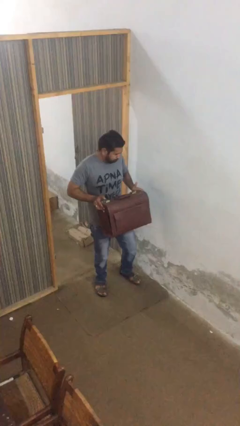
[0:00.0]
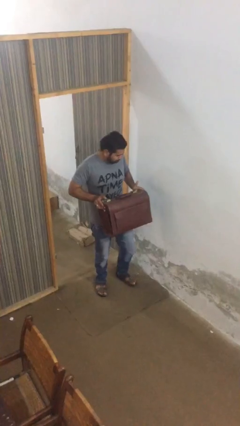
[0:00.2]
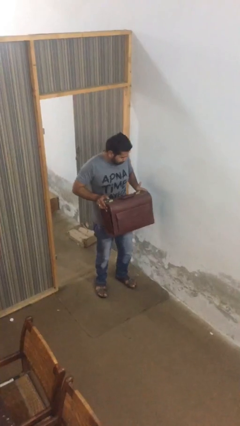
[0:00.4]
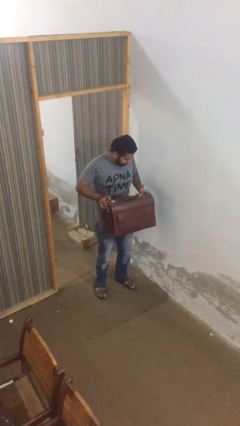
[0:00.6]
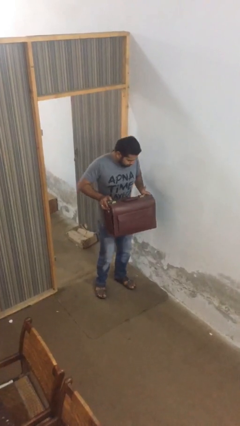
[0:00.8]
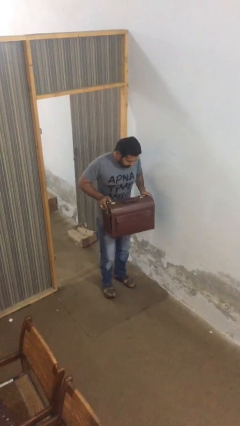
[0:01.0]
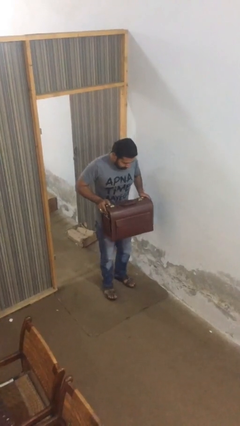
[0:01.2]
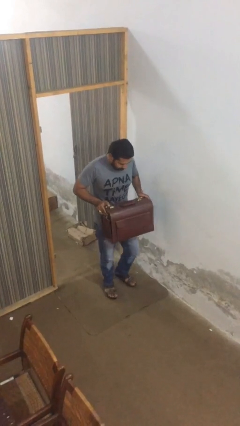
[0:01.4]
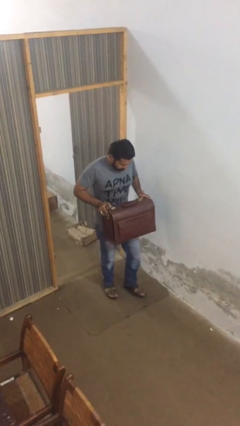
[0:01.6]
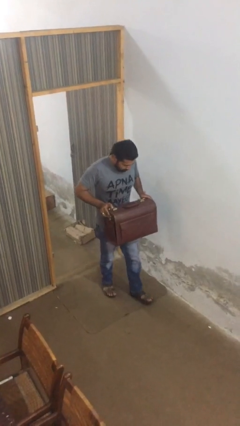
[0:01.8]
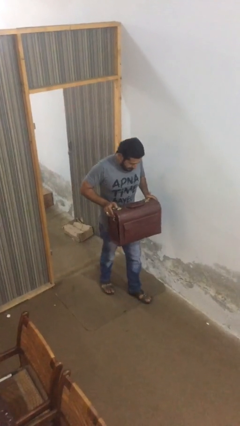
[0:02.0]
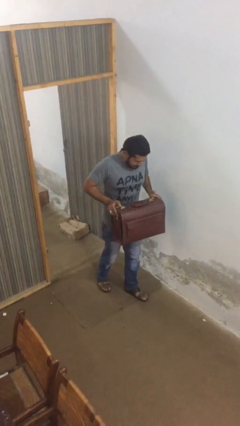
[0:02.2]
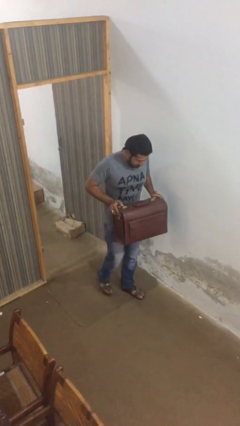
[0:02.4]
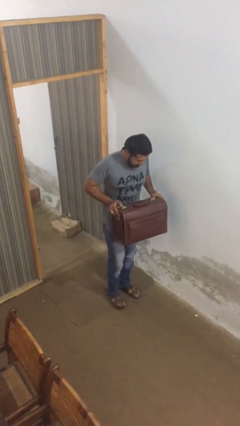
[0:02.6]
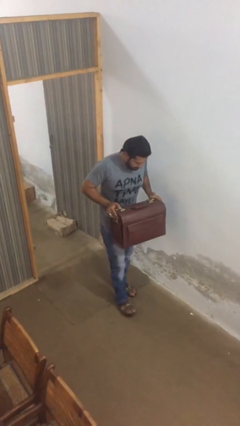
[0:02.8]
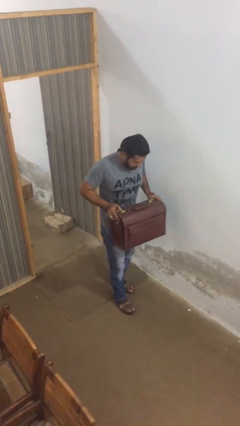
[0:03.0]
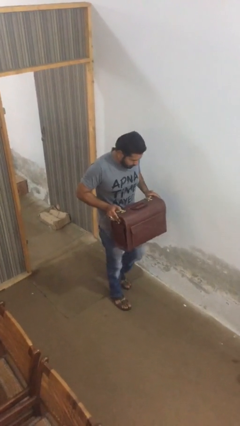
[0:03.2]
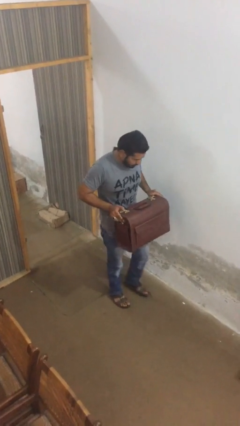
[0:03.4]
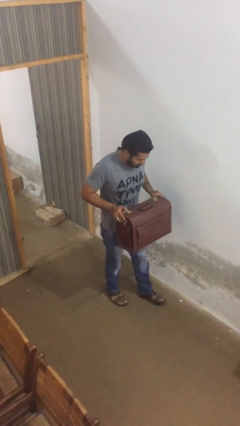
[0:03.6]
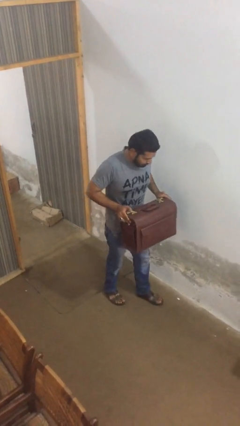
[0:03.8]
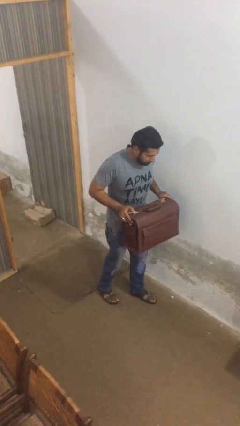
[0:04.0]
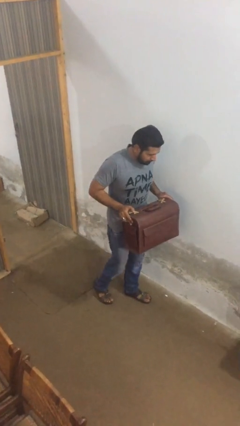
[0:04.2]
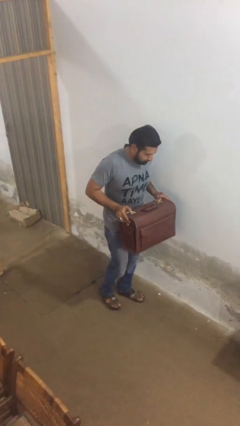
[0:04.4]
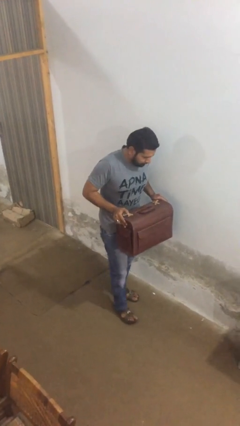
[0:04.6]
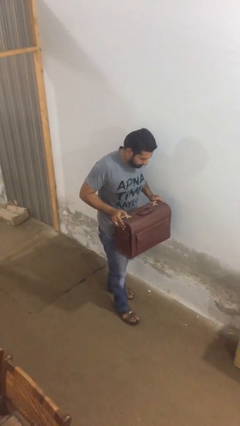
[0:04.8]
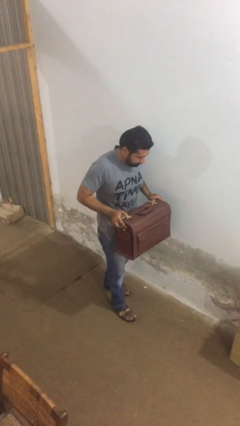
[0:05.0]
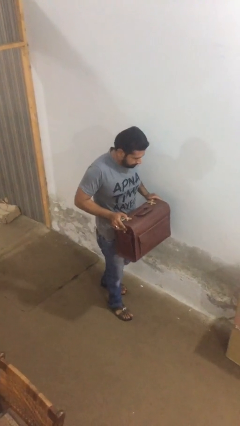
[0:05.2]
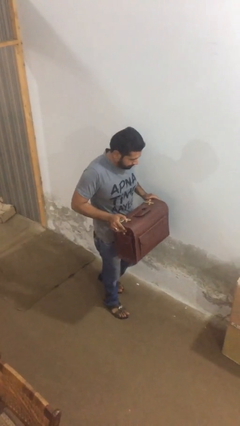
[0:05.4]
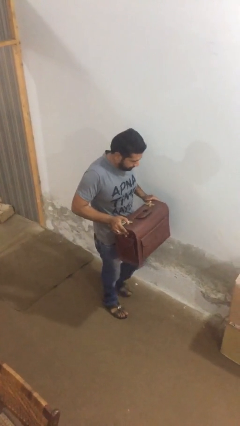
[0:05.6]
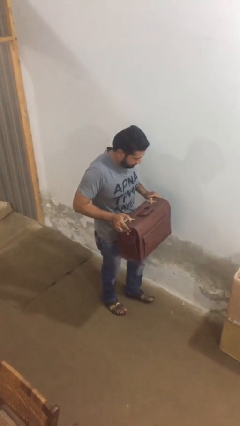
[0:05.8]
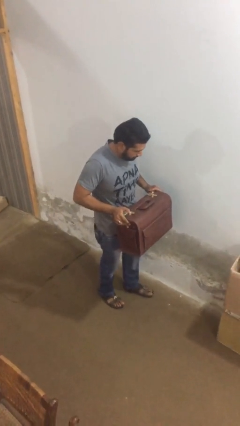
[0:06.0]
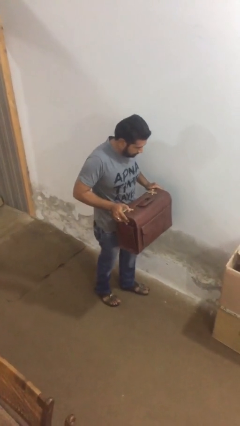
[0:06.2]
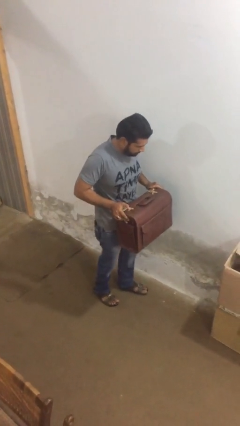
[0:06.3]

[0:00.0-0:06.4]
person carries heavy object

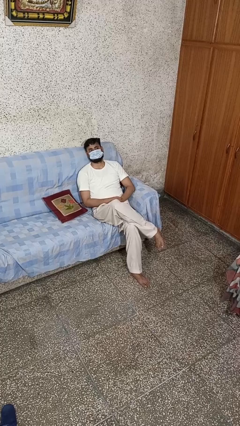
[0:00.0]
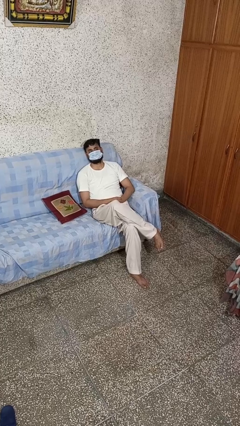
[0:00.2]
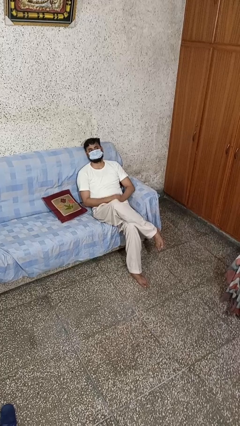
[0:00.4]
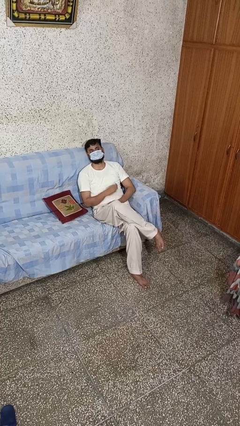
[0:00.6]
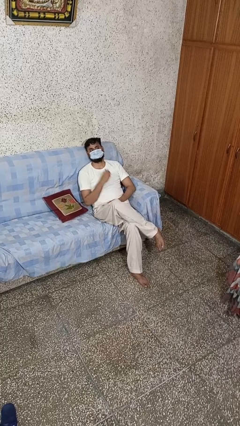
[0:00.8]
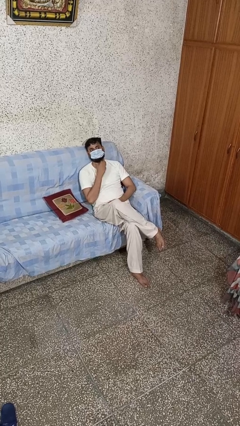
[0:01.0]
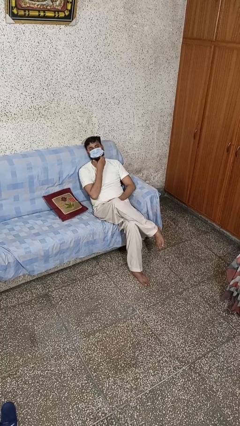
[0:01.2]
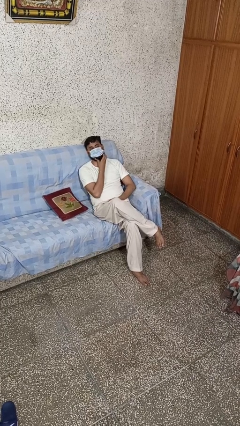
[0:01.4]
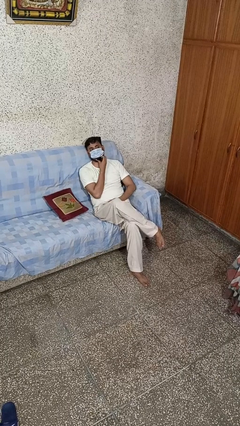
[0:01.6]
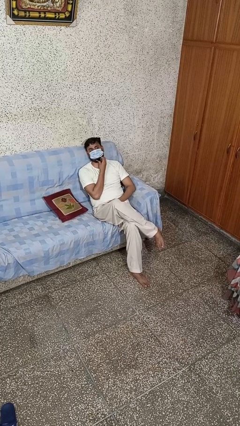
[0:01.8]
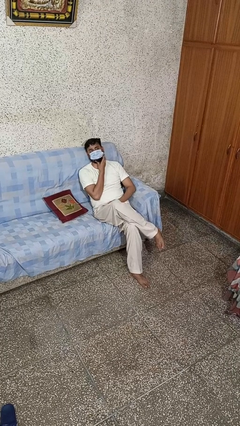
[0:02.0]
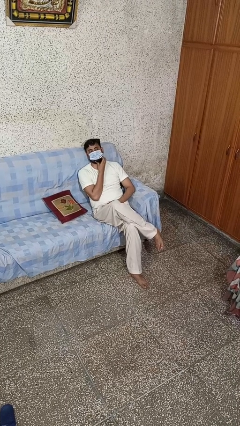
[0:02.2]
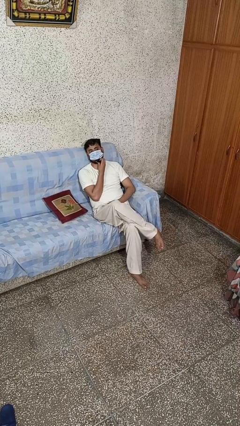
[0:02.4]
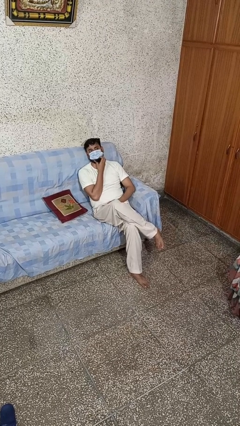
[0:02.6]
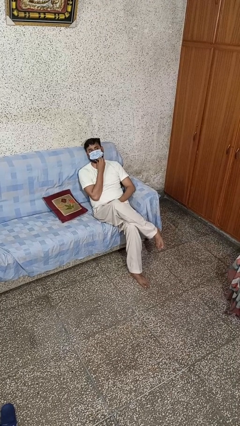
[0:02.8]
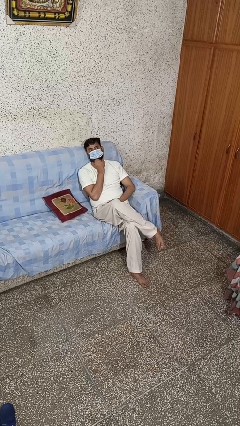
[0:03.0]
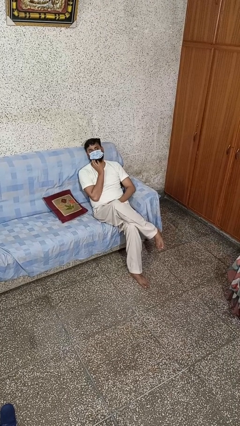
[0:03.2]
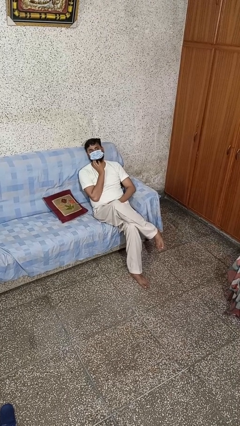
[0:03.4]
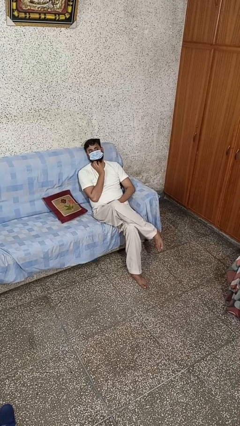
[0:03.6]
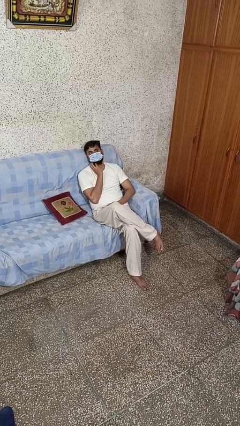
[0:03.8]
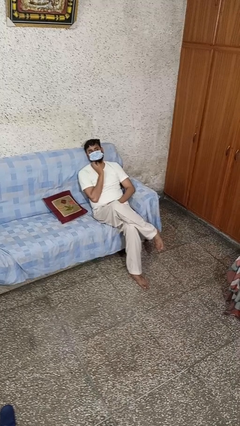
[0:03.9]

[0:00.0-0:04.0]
person strokes chin

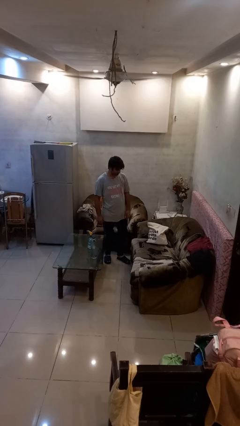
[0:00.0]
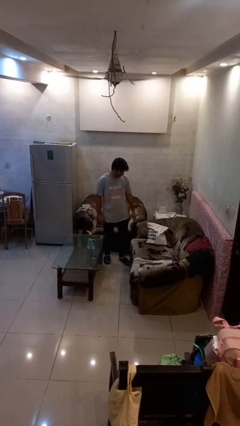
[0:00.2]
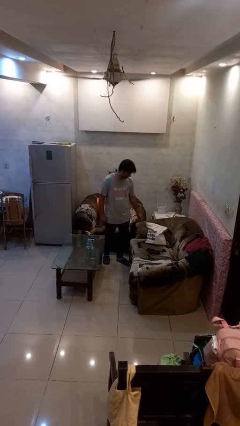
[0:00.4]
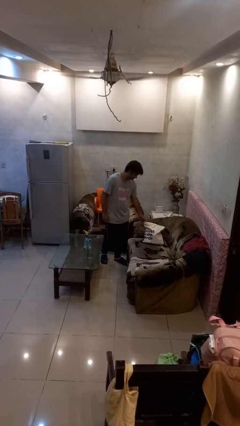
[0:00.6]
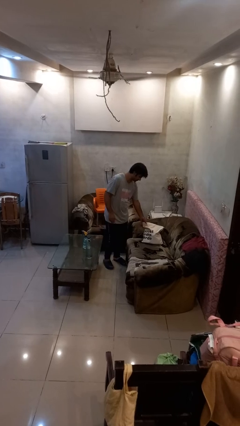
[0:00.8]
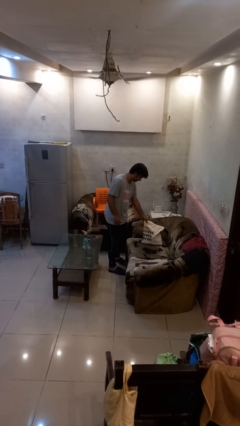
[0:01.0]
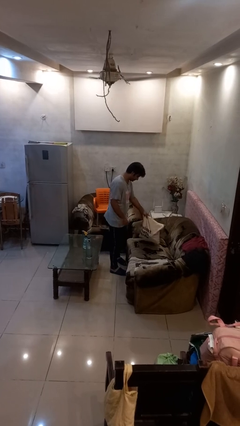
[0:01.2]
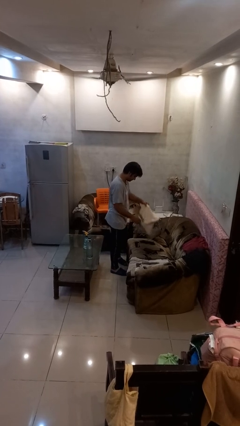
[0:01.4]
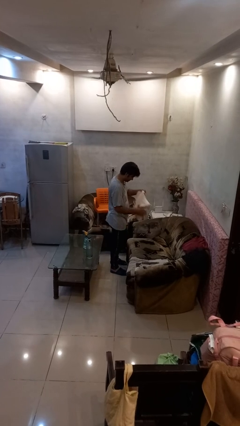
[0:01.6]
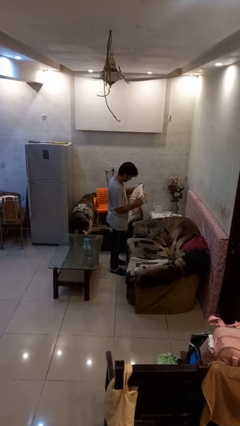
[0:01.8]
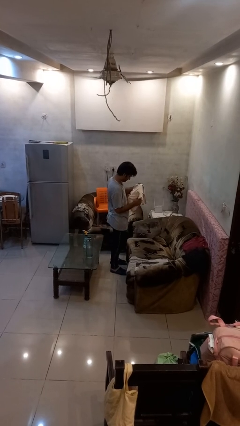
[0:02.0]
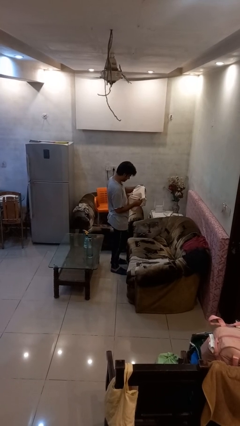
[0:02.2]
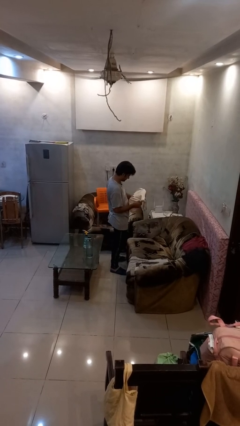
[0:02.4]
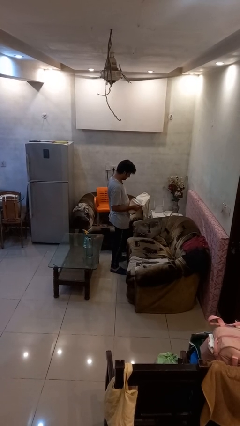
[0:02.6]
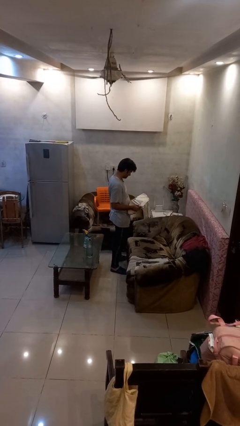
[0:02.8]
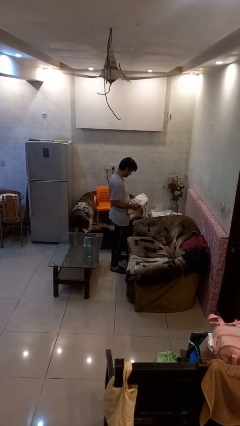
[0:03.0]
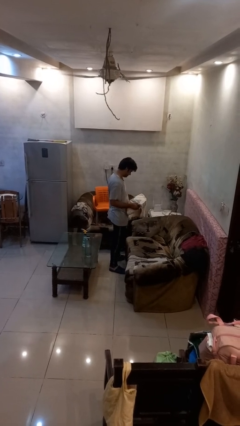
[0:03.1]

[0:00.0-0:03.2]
person picks up object from couch

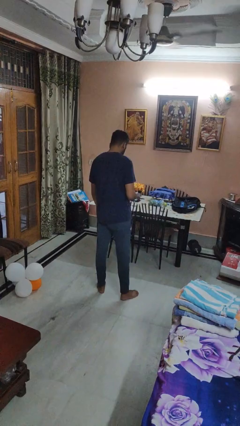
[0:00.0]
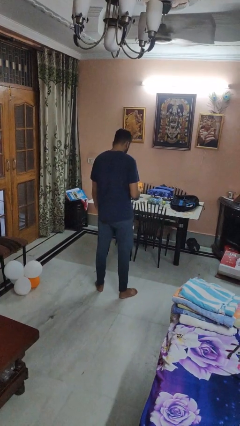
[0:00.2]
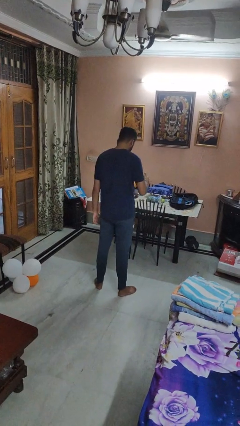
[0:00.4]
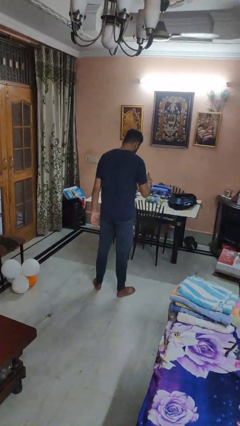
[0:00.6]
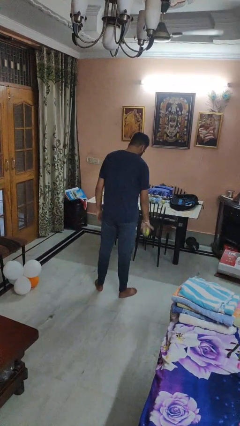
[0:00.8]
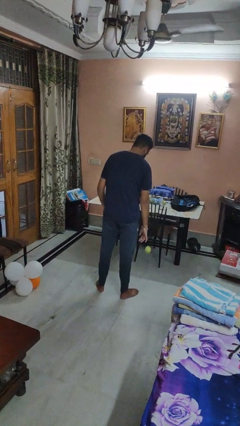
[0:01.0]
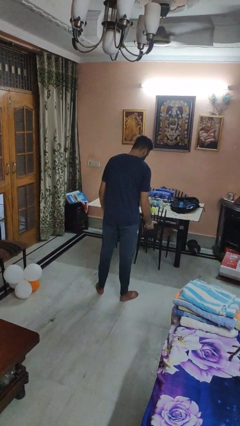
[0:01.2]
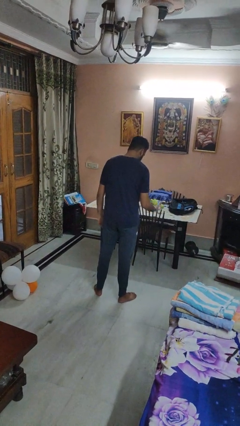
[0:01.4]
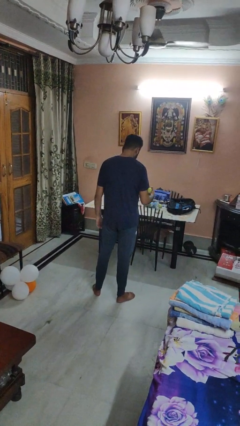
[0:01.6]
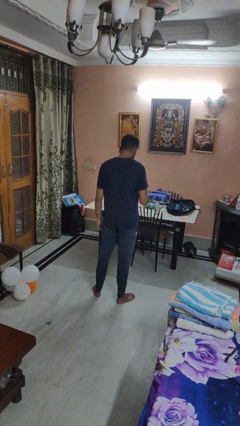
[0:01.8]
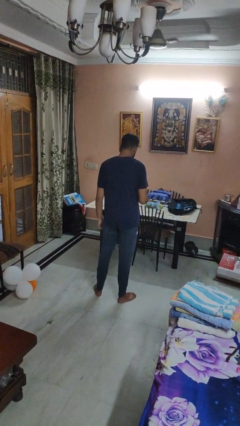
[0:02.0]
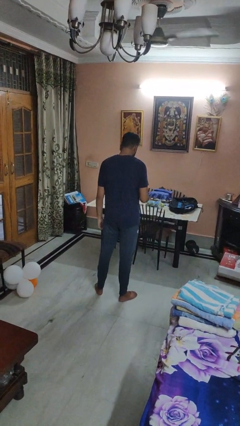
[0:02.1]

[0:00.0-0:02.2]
person bounces ball on floor

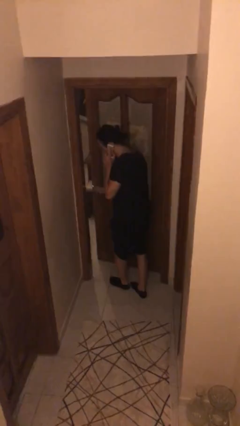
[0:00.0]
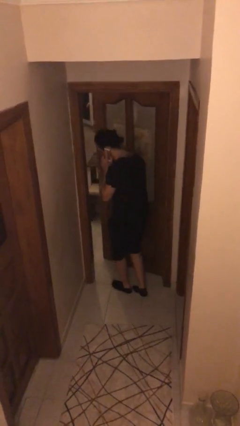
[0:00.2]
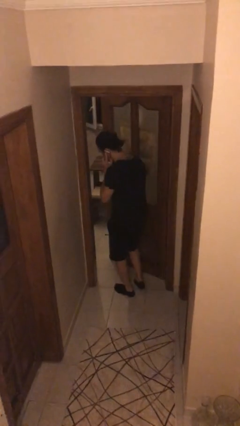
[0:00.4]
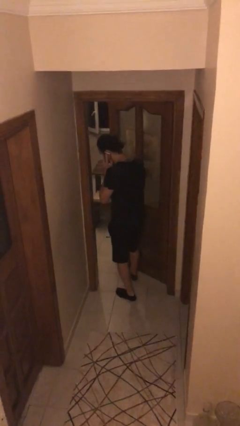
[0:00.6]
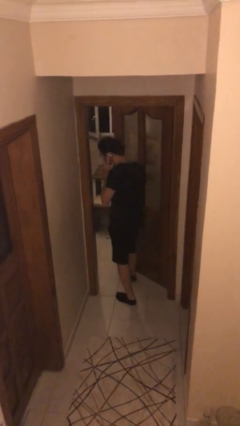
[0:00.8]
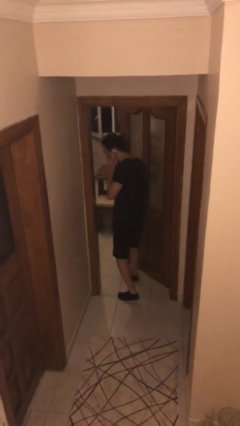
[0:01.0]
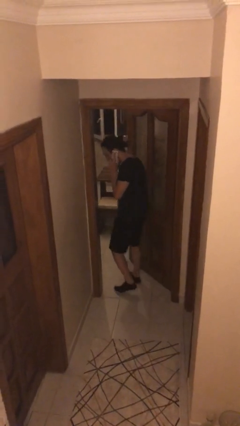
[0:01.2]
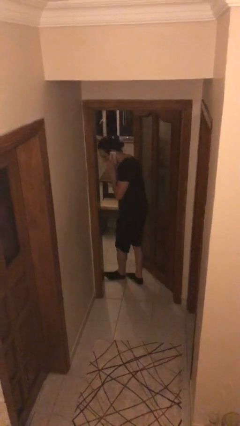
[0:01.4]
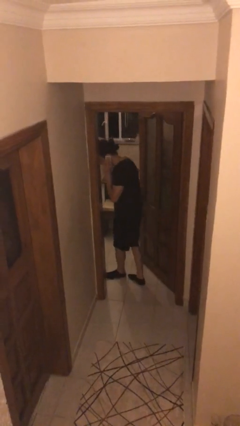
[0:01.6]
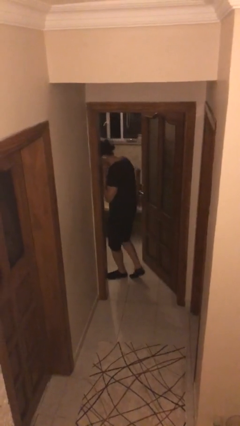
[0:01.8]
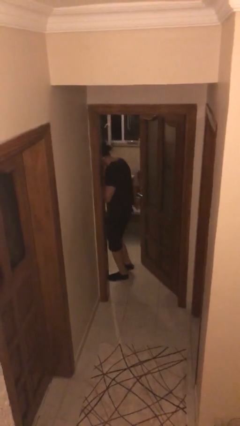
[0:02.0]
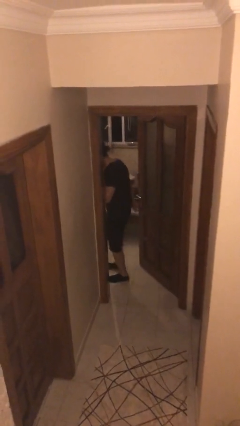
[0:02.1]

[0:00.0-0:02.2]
person exits scene through structure
